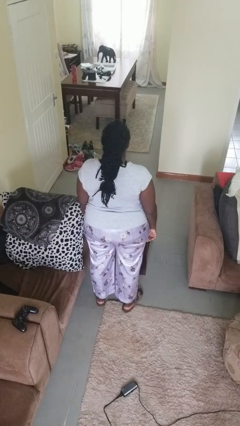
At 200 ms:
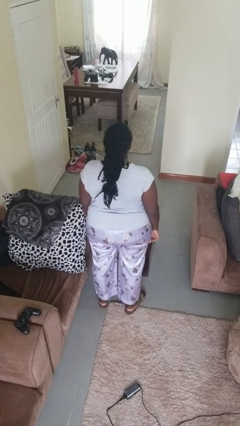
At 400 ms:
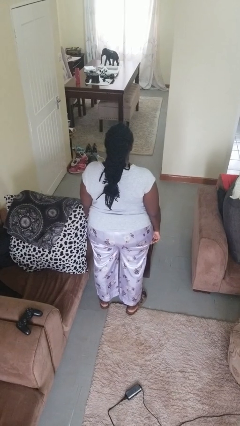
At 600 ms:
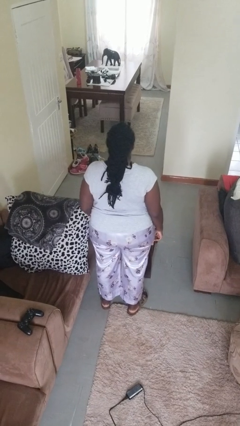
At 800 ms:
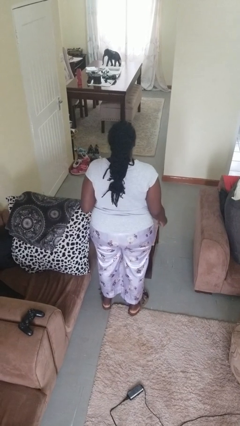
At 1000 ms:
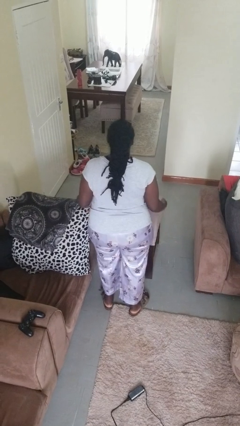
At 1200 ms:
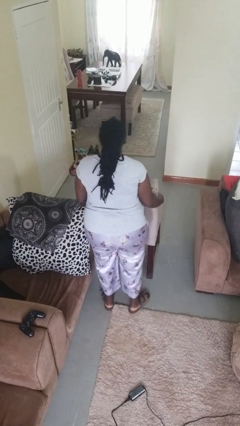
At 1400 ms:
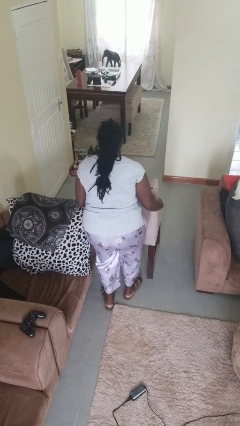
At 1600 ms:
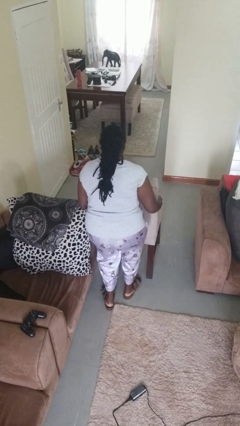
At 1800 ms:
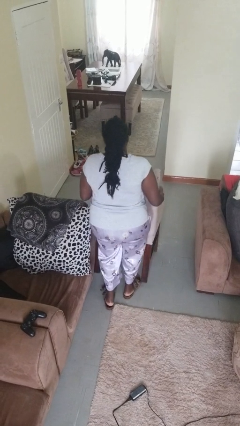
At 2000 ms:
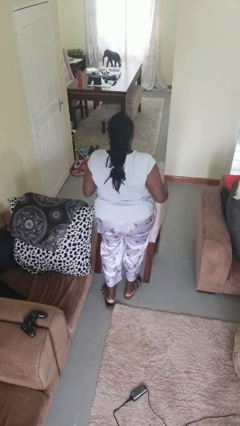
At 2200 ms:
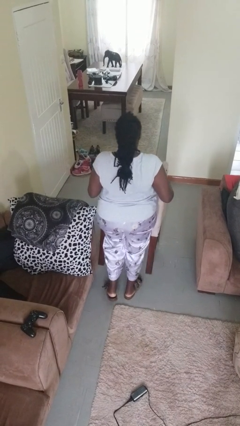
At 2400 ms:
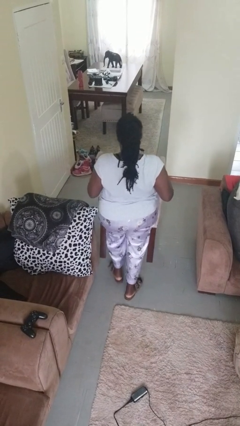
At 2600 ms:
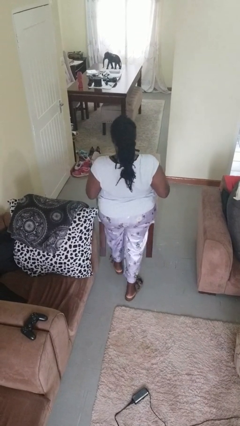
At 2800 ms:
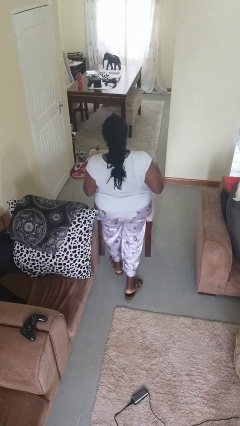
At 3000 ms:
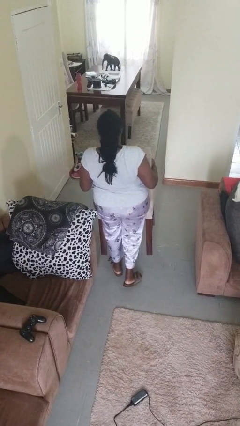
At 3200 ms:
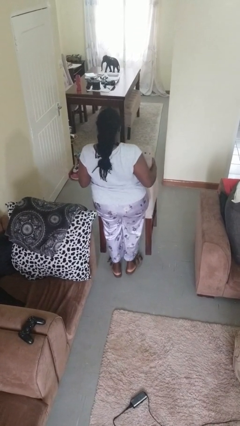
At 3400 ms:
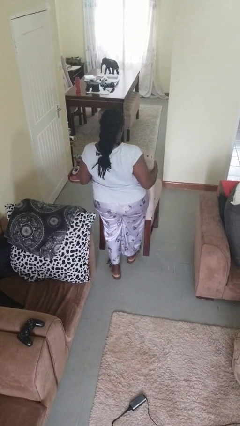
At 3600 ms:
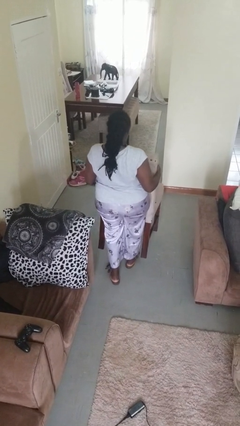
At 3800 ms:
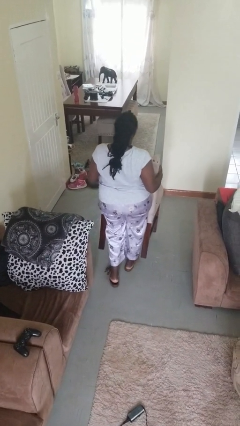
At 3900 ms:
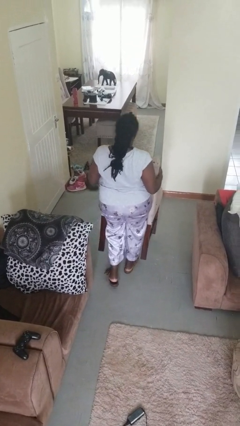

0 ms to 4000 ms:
person carries furniture

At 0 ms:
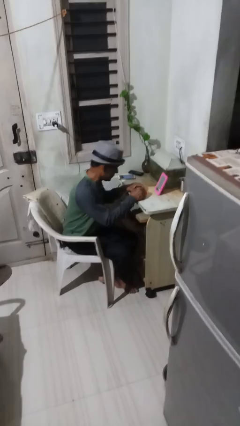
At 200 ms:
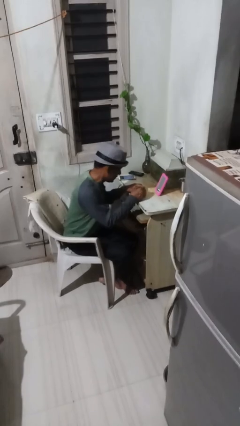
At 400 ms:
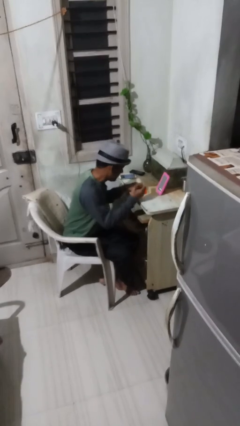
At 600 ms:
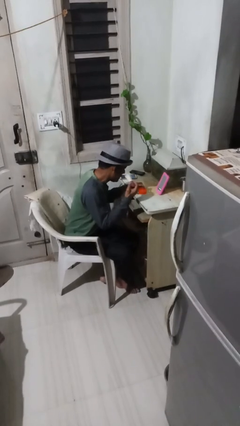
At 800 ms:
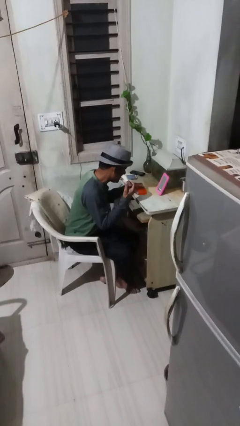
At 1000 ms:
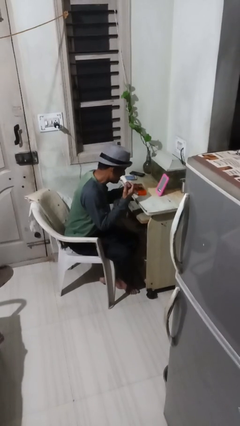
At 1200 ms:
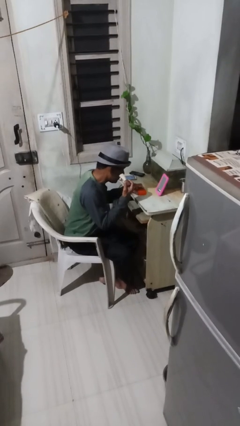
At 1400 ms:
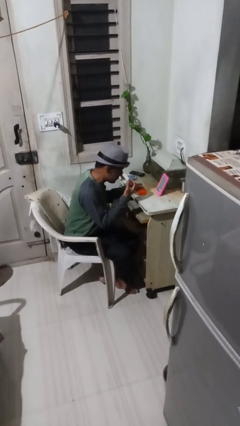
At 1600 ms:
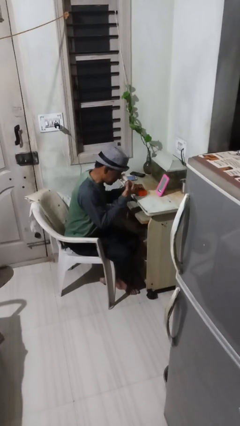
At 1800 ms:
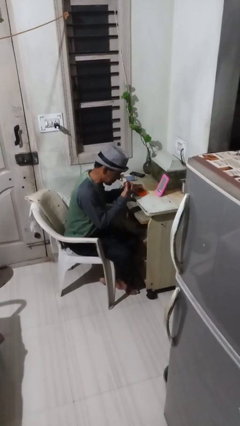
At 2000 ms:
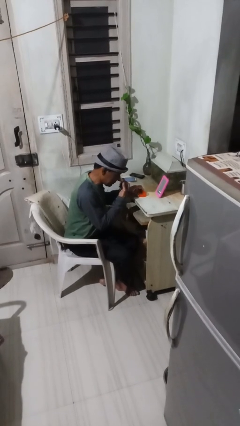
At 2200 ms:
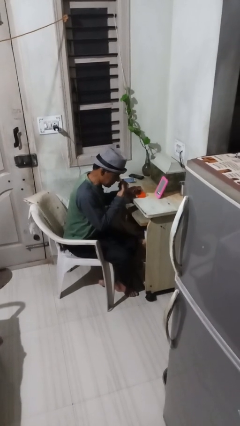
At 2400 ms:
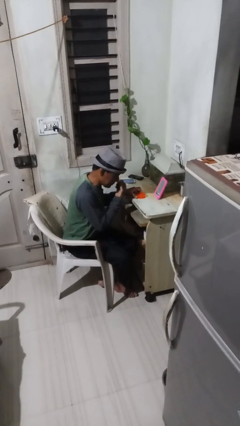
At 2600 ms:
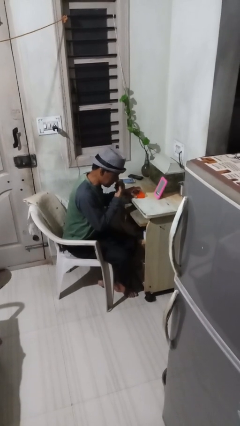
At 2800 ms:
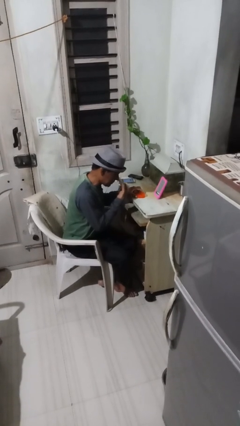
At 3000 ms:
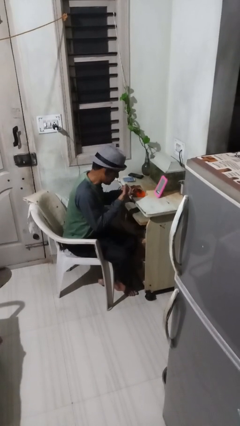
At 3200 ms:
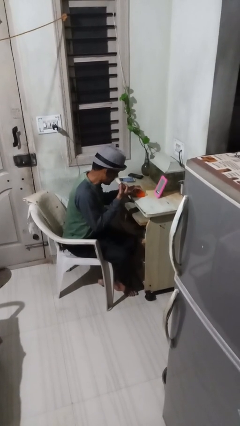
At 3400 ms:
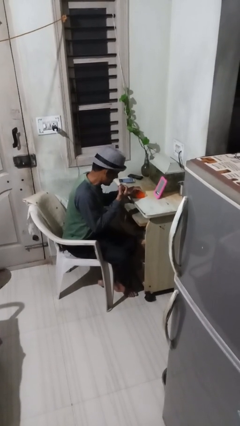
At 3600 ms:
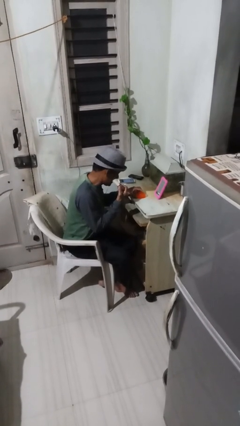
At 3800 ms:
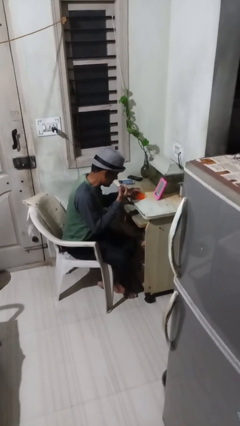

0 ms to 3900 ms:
person applies foundation makeup

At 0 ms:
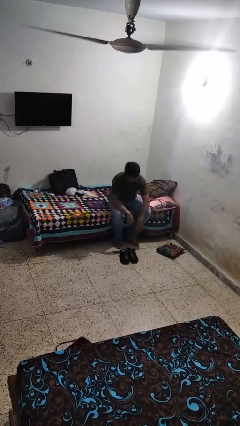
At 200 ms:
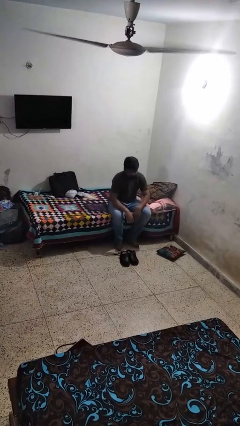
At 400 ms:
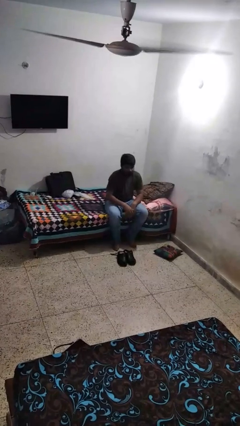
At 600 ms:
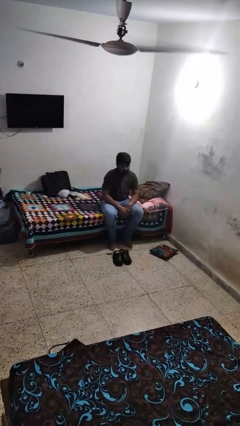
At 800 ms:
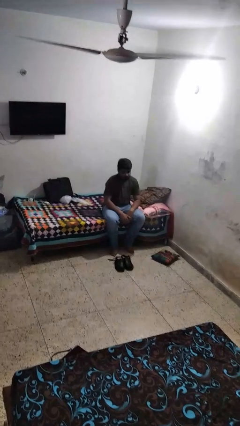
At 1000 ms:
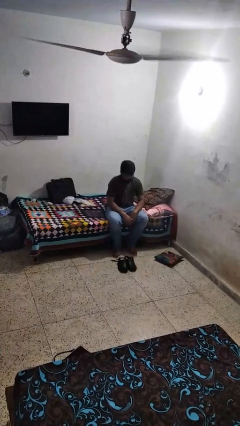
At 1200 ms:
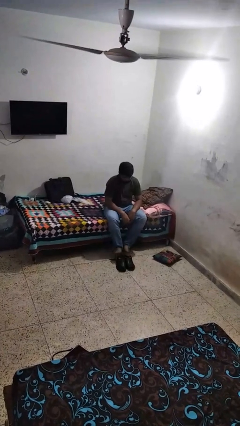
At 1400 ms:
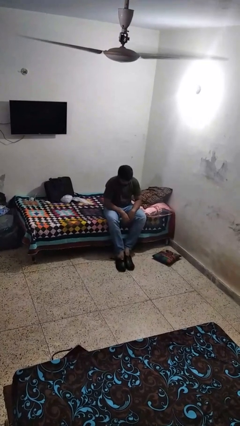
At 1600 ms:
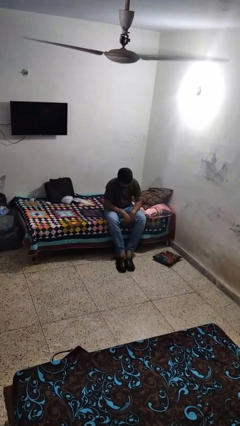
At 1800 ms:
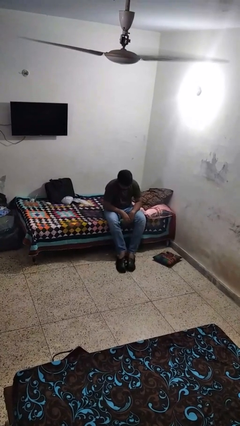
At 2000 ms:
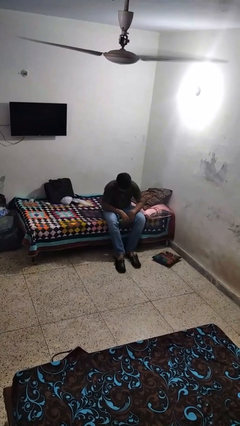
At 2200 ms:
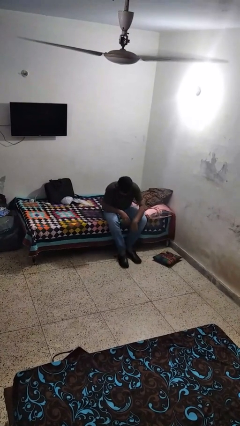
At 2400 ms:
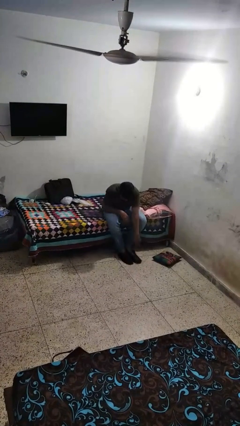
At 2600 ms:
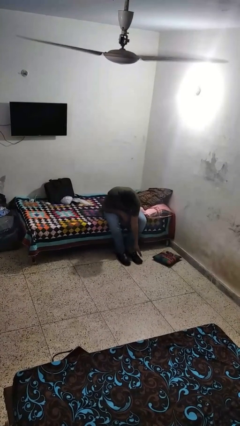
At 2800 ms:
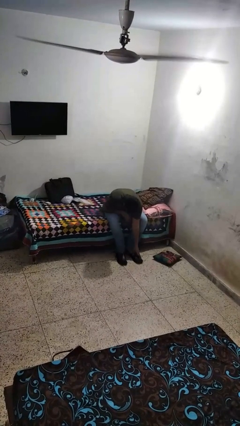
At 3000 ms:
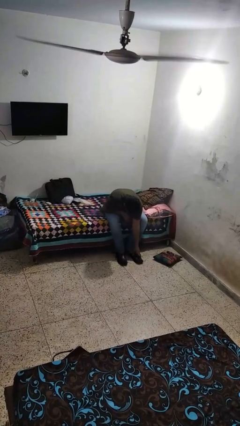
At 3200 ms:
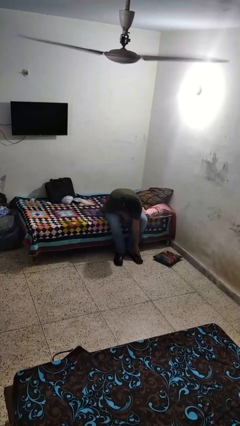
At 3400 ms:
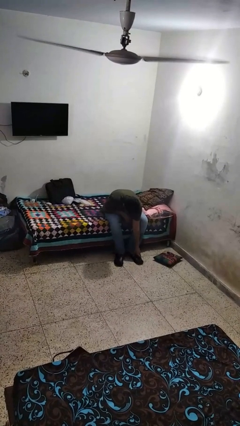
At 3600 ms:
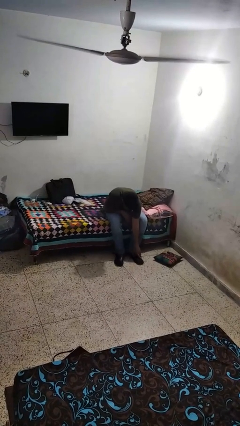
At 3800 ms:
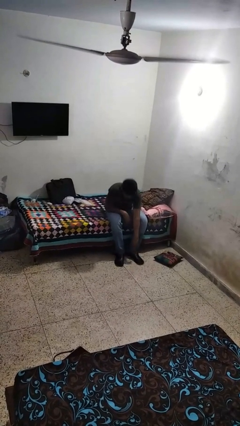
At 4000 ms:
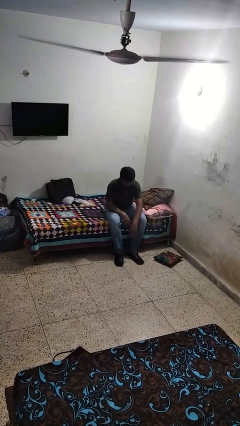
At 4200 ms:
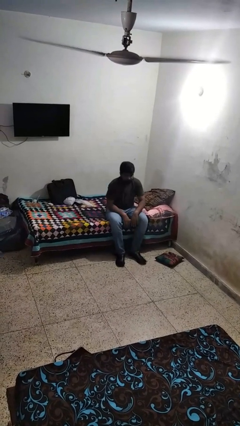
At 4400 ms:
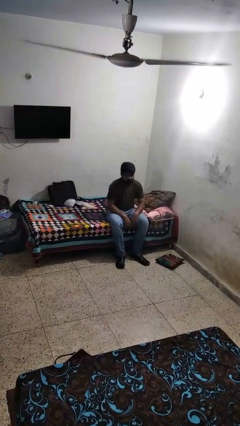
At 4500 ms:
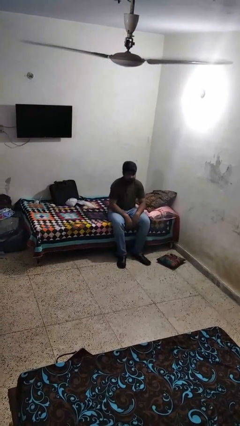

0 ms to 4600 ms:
person puts on shoes

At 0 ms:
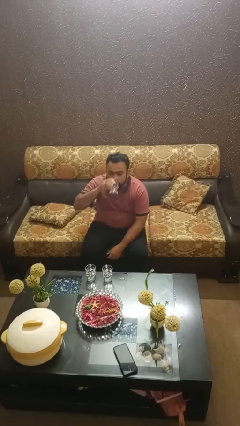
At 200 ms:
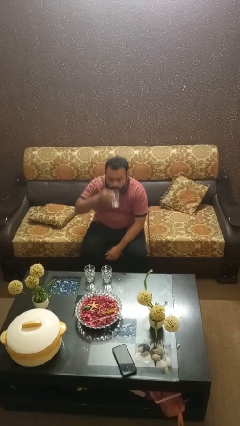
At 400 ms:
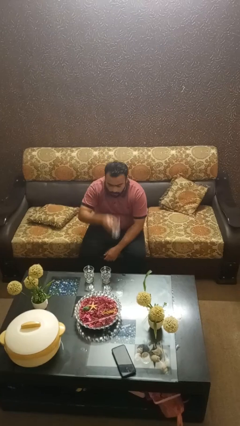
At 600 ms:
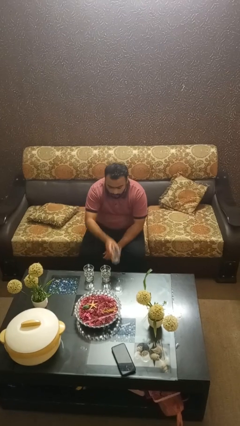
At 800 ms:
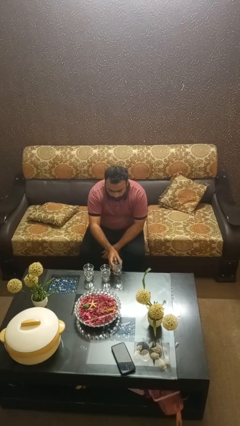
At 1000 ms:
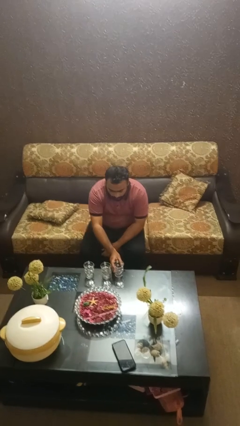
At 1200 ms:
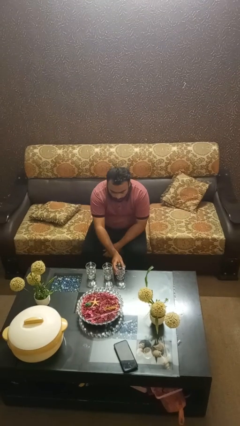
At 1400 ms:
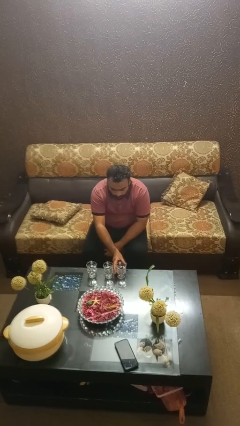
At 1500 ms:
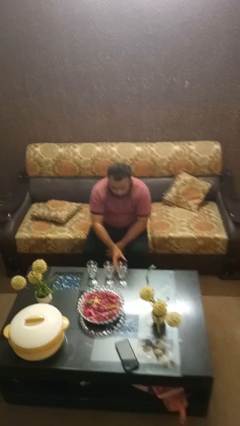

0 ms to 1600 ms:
person puts down object on table

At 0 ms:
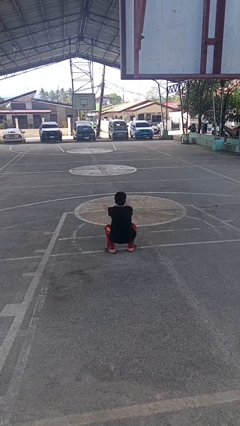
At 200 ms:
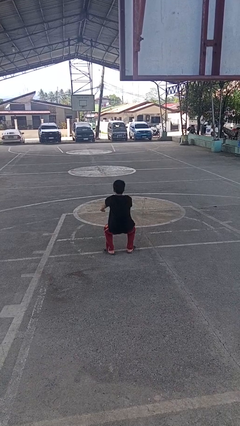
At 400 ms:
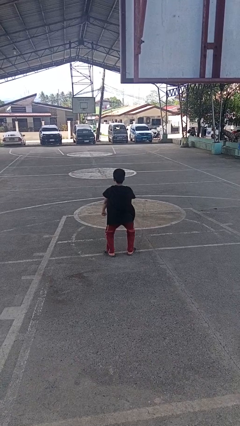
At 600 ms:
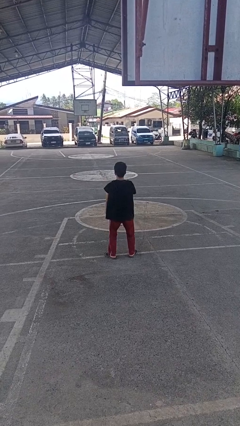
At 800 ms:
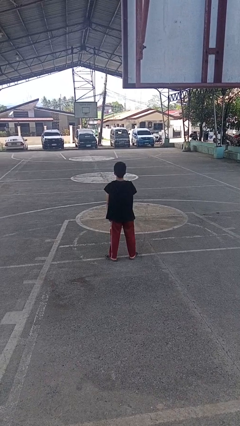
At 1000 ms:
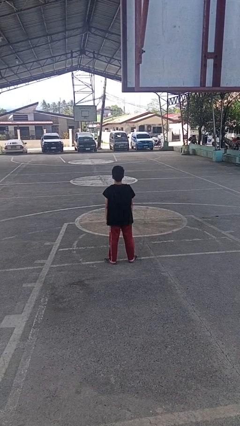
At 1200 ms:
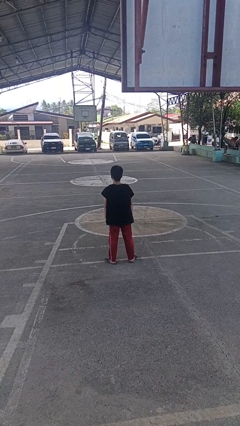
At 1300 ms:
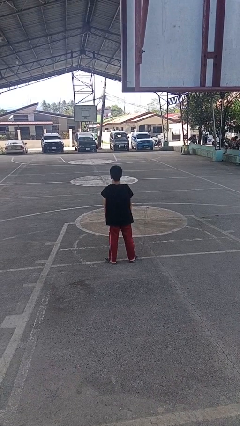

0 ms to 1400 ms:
person stands up

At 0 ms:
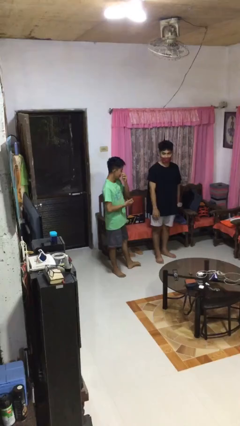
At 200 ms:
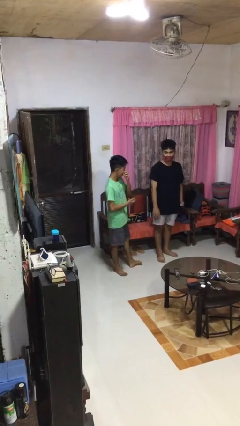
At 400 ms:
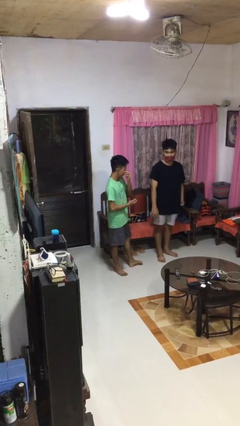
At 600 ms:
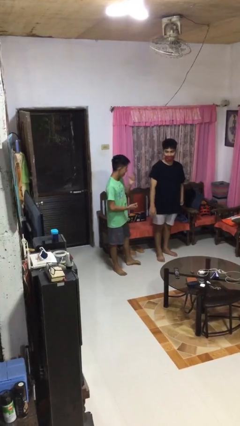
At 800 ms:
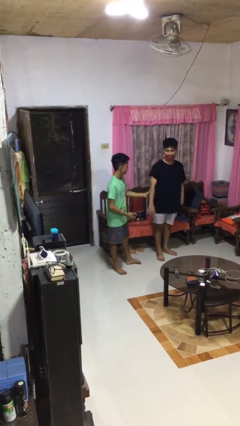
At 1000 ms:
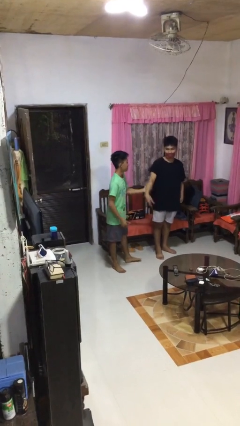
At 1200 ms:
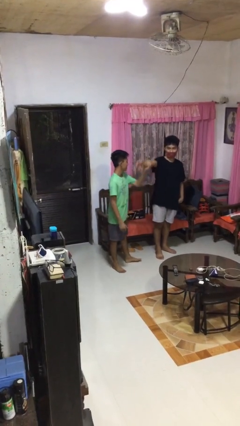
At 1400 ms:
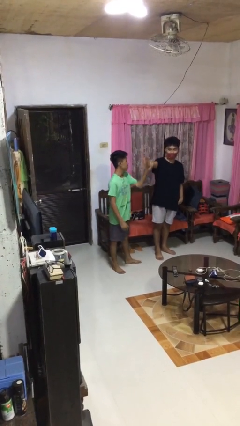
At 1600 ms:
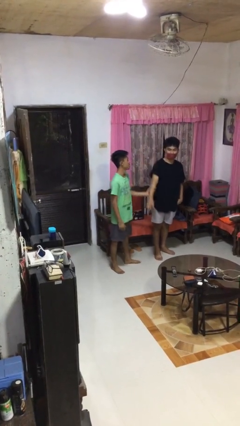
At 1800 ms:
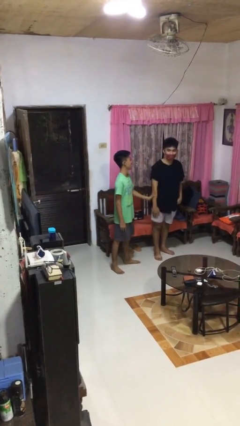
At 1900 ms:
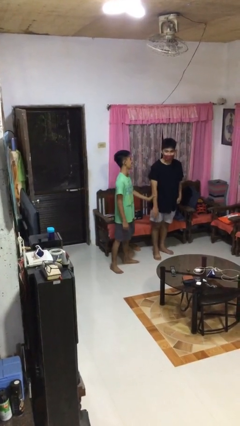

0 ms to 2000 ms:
person grabs person by forearm
